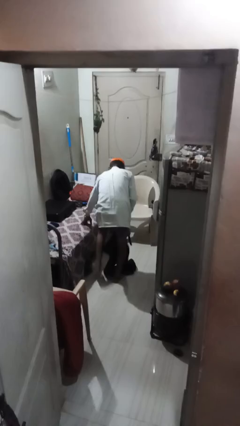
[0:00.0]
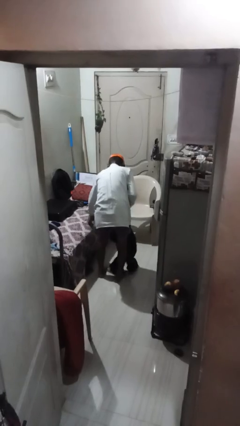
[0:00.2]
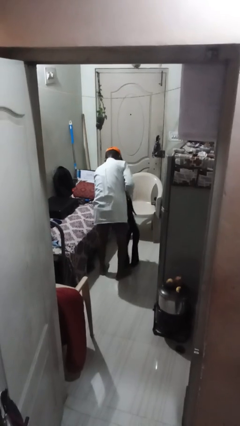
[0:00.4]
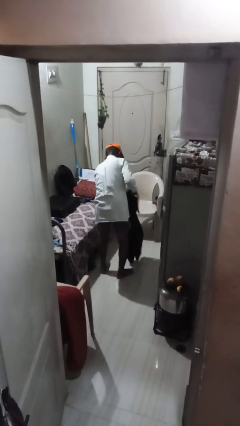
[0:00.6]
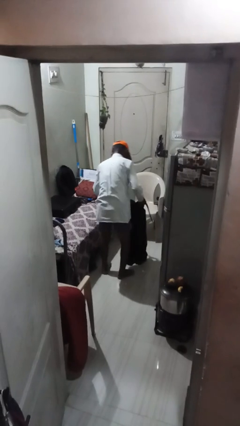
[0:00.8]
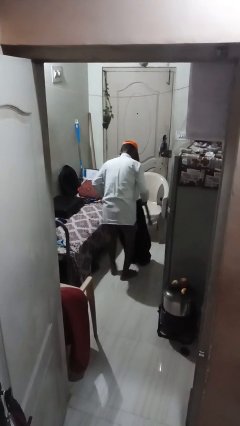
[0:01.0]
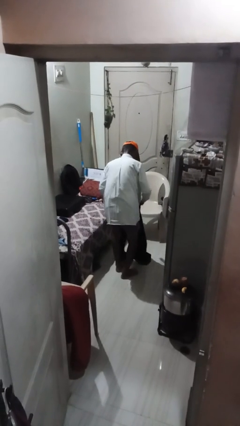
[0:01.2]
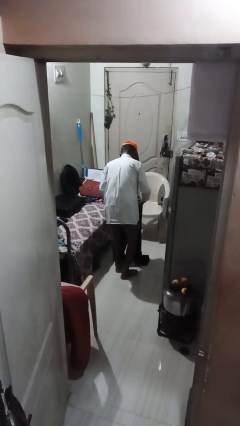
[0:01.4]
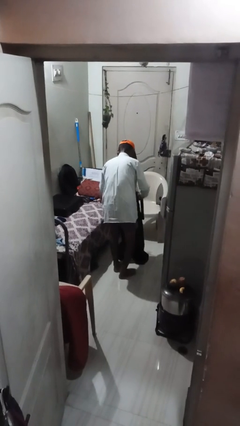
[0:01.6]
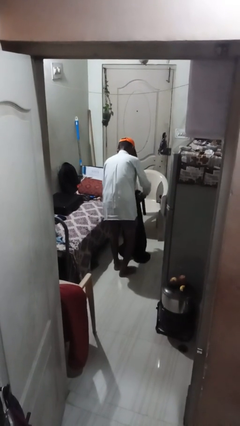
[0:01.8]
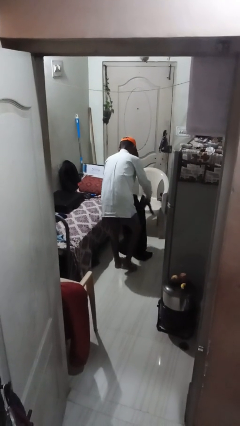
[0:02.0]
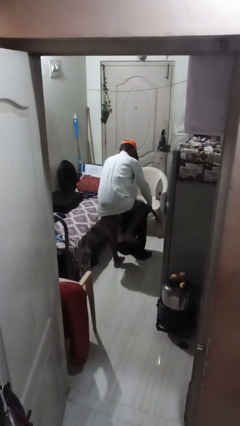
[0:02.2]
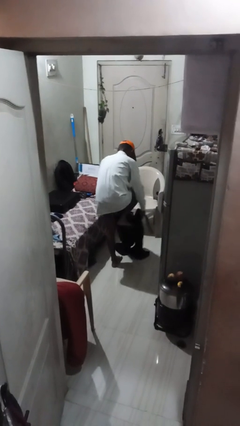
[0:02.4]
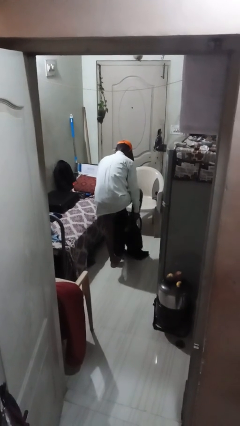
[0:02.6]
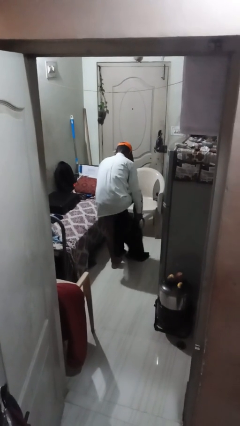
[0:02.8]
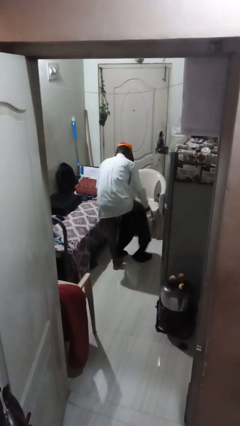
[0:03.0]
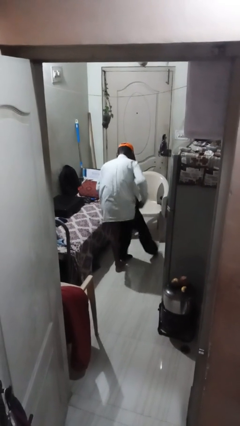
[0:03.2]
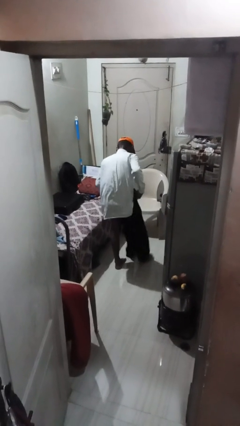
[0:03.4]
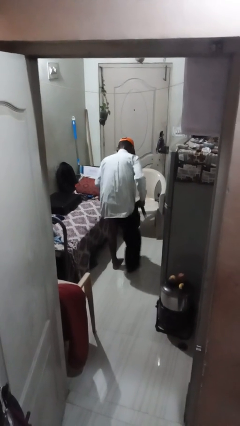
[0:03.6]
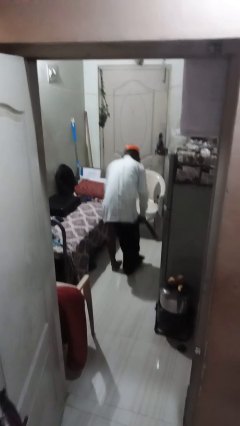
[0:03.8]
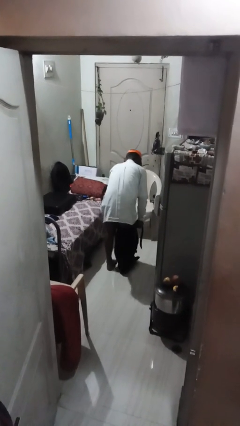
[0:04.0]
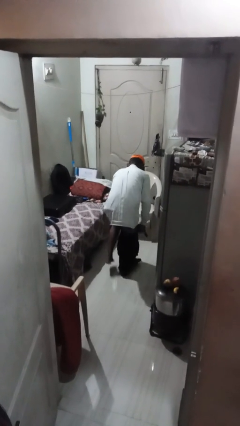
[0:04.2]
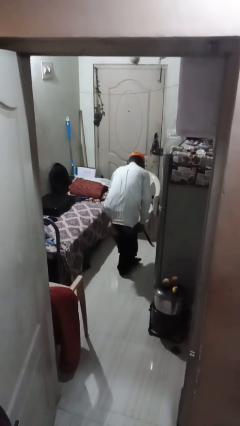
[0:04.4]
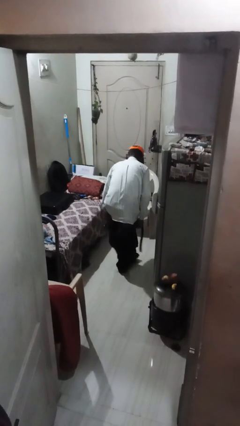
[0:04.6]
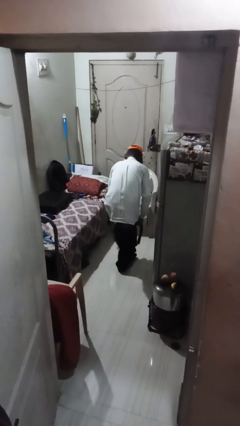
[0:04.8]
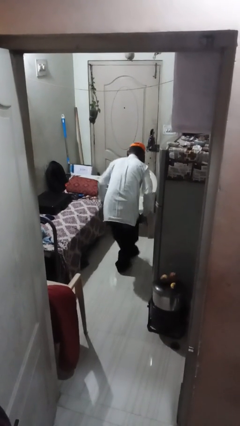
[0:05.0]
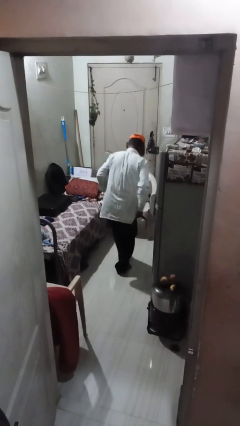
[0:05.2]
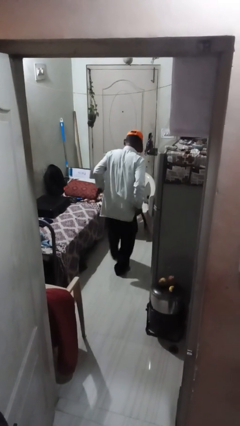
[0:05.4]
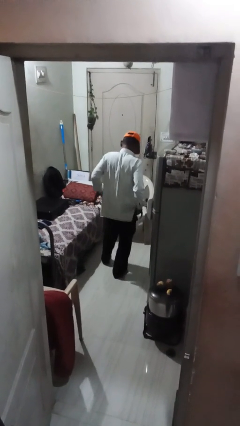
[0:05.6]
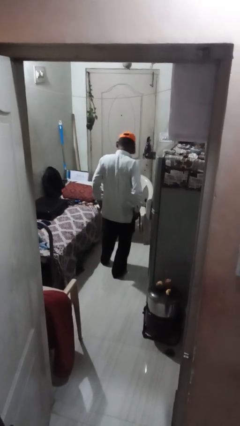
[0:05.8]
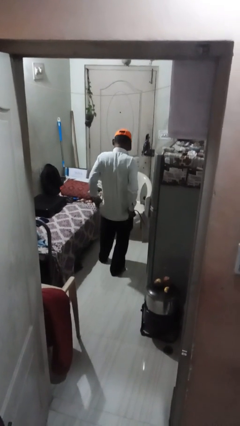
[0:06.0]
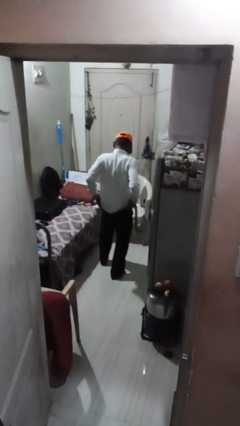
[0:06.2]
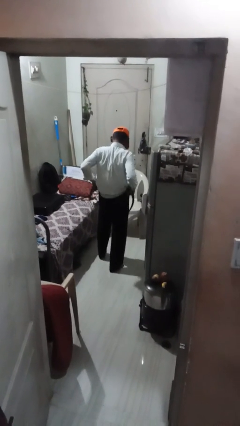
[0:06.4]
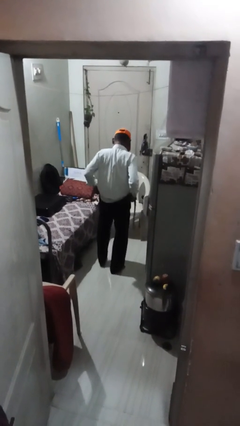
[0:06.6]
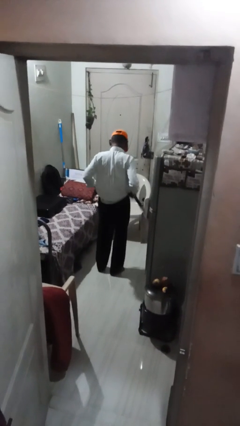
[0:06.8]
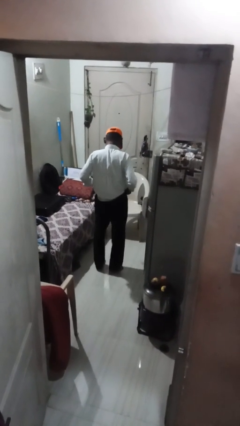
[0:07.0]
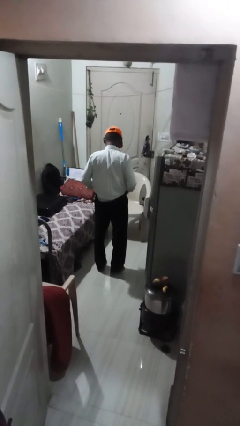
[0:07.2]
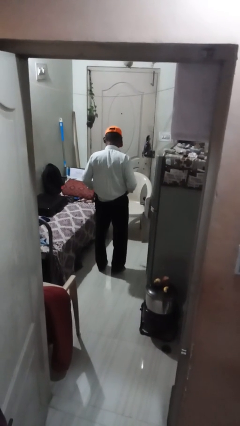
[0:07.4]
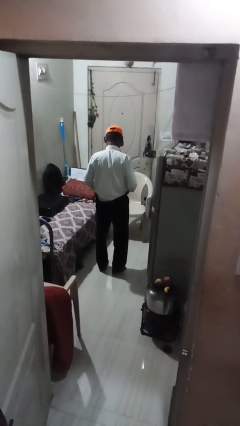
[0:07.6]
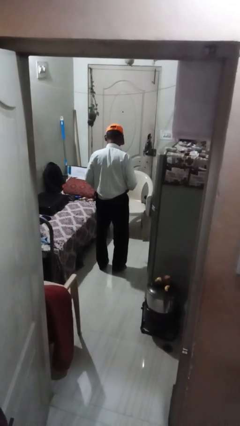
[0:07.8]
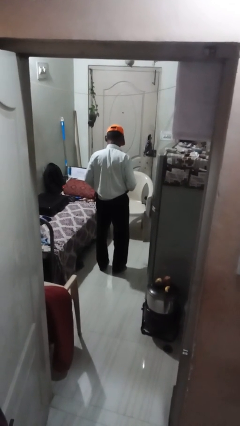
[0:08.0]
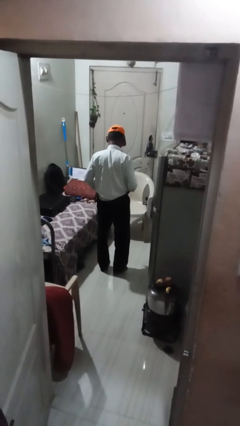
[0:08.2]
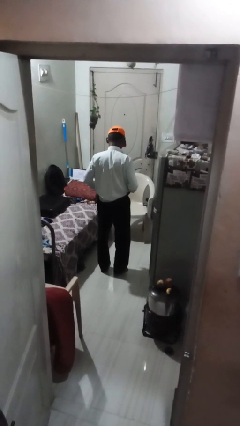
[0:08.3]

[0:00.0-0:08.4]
person puts on pants

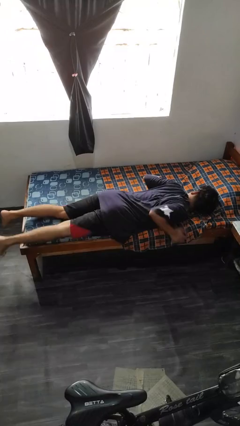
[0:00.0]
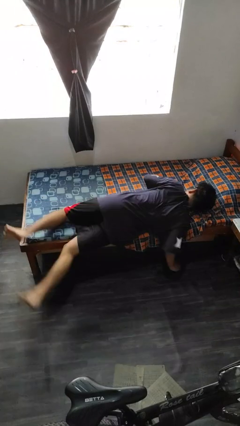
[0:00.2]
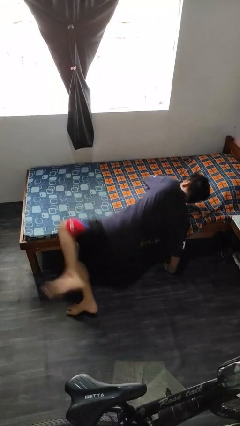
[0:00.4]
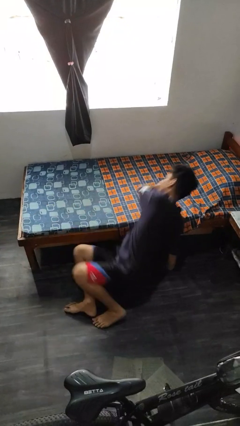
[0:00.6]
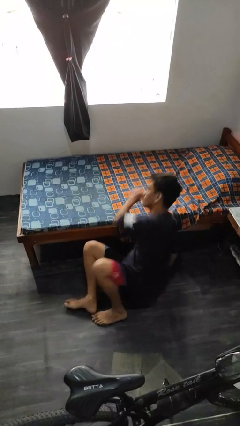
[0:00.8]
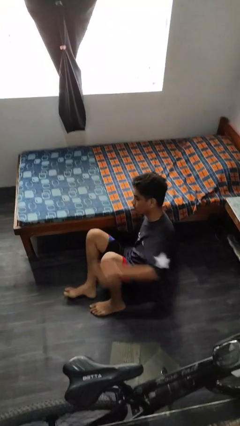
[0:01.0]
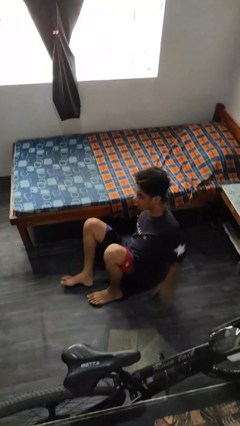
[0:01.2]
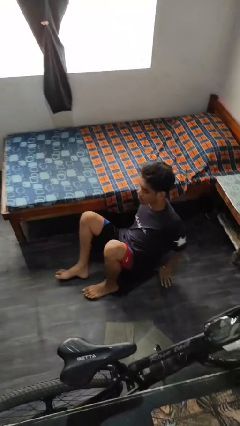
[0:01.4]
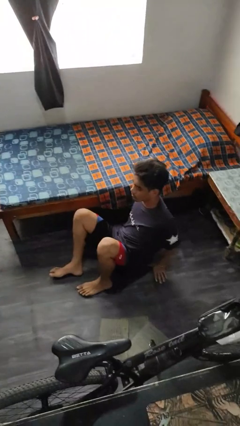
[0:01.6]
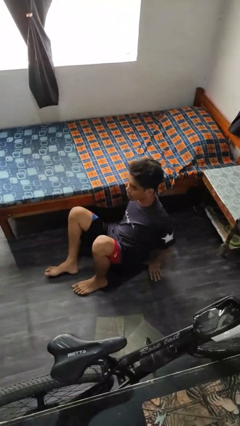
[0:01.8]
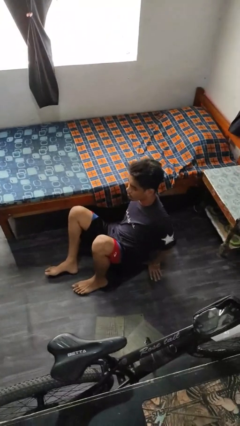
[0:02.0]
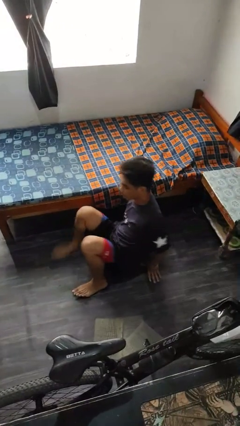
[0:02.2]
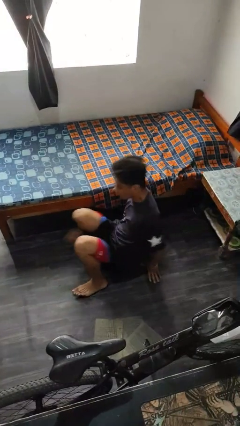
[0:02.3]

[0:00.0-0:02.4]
person falls from bed

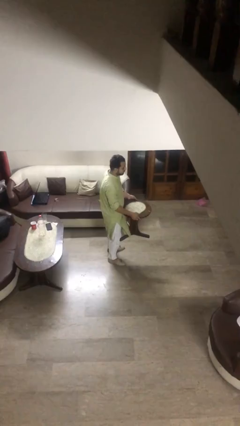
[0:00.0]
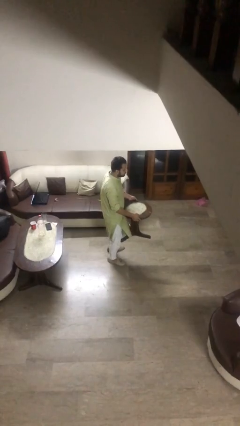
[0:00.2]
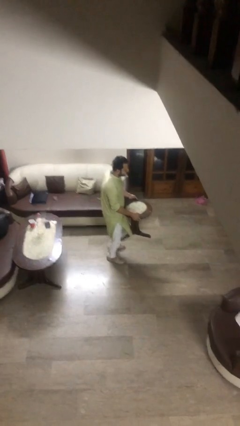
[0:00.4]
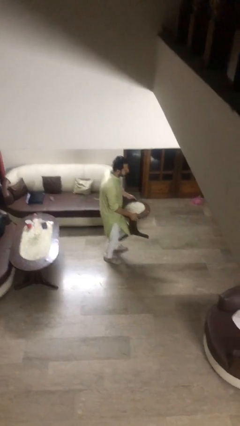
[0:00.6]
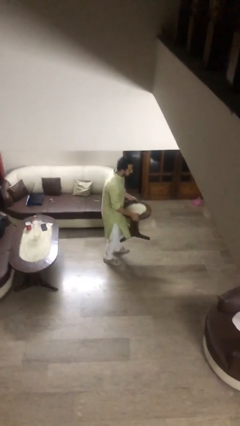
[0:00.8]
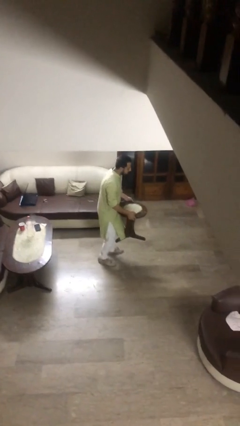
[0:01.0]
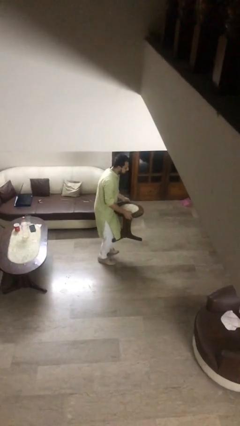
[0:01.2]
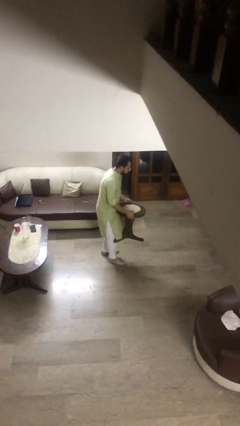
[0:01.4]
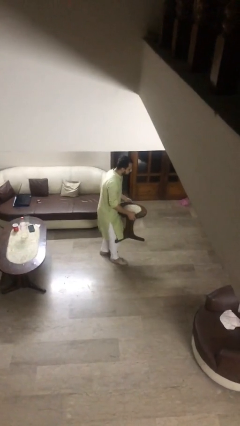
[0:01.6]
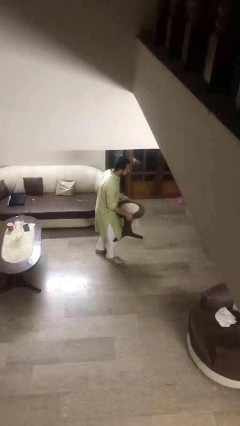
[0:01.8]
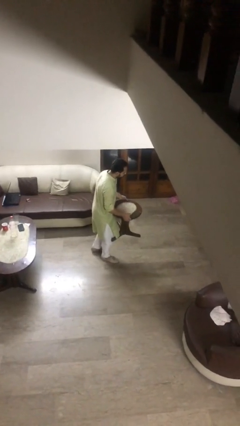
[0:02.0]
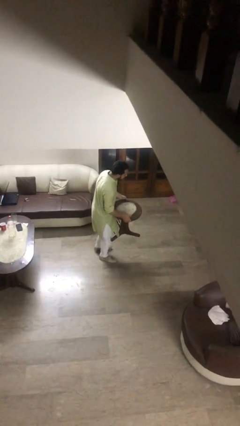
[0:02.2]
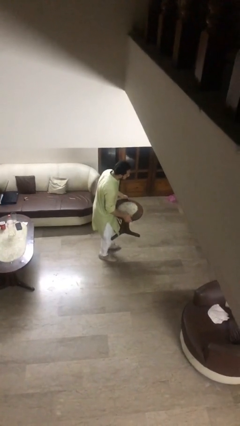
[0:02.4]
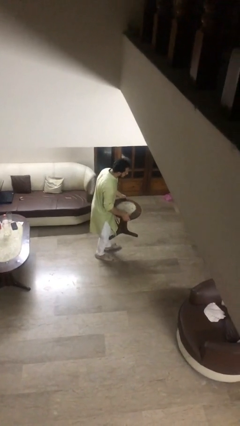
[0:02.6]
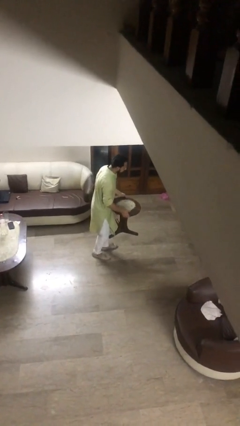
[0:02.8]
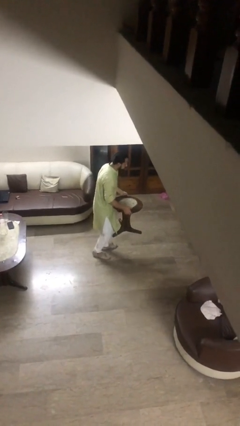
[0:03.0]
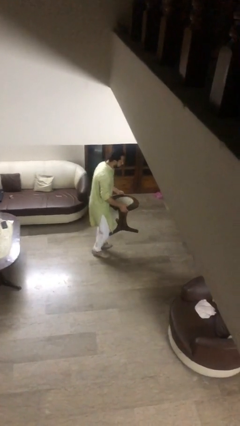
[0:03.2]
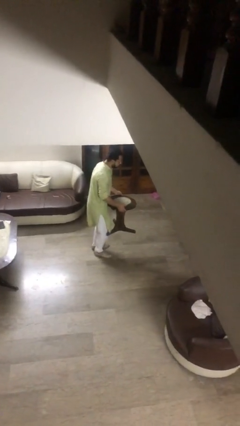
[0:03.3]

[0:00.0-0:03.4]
person carries heavy object

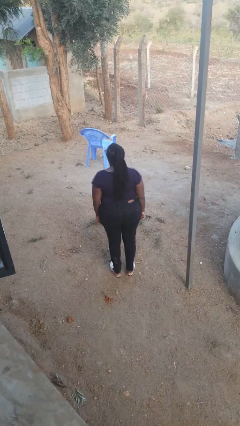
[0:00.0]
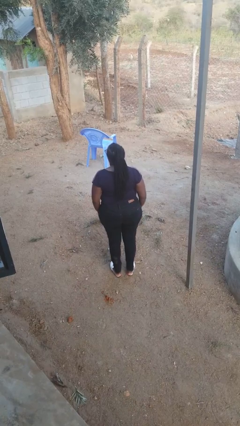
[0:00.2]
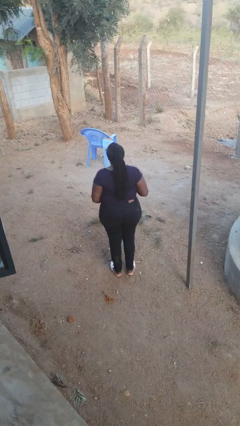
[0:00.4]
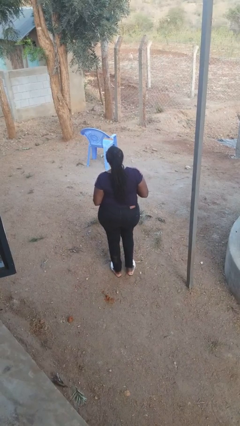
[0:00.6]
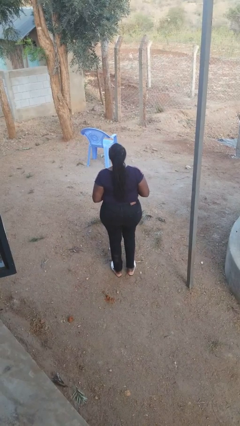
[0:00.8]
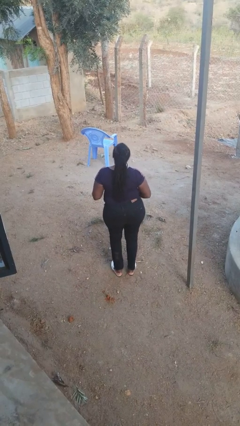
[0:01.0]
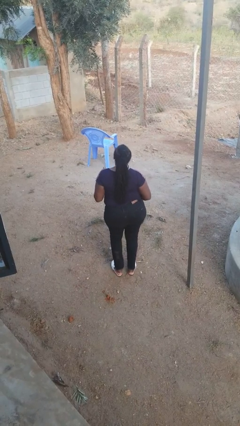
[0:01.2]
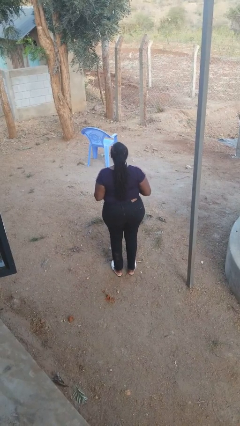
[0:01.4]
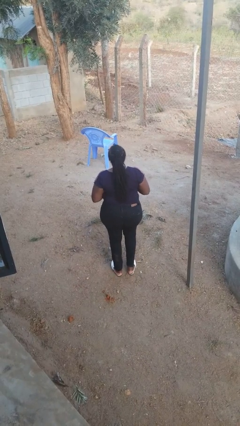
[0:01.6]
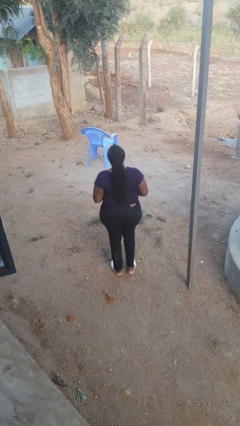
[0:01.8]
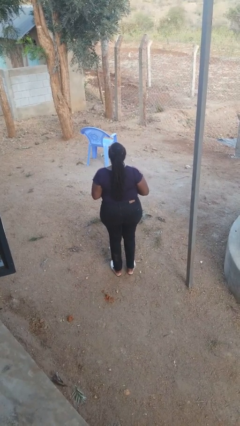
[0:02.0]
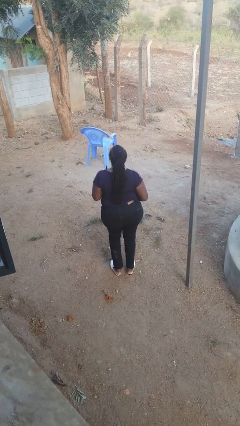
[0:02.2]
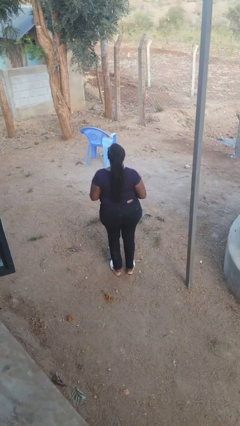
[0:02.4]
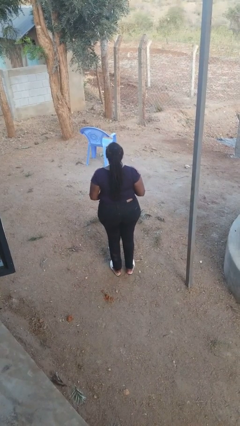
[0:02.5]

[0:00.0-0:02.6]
person wiggles hips

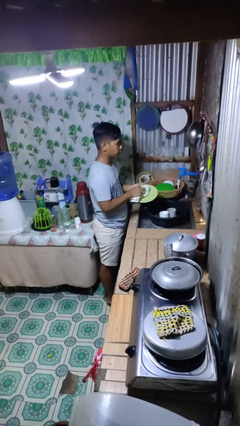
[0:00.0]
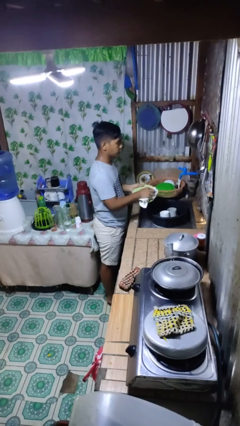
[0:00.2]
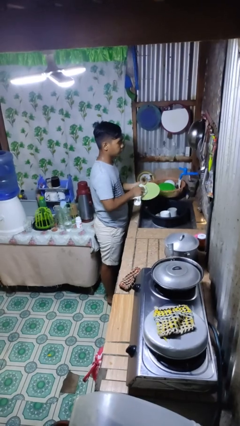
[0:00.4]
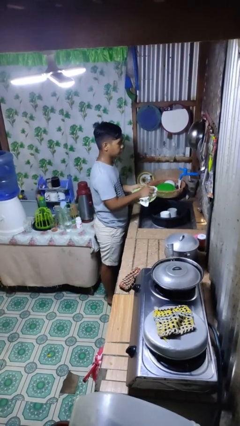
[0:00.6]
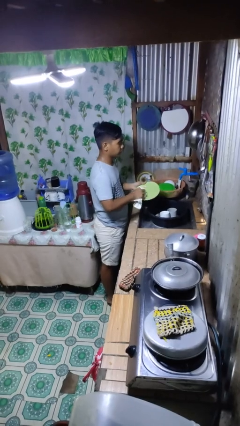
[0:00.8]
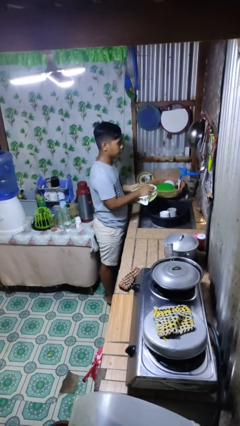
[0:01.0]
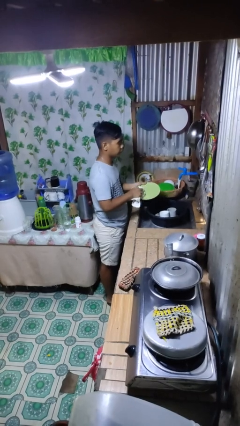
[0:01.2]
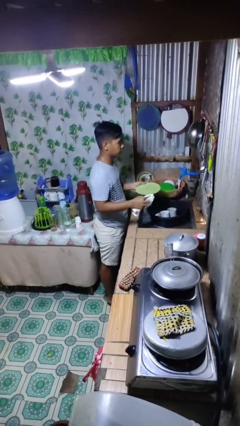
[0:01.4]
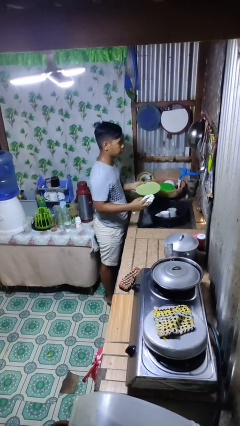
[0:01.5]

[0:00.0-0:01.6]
person dries dish
